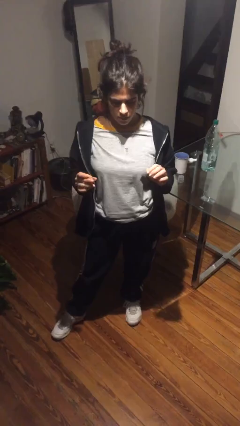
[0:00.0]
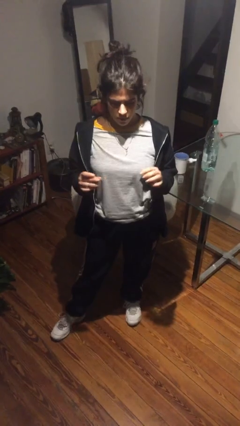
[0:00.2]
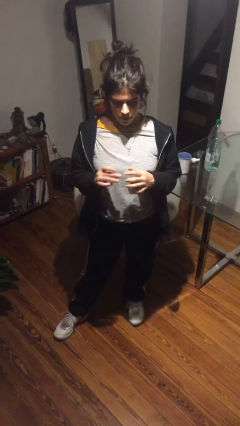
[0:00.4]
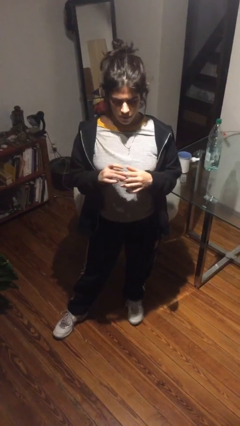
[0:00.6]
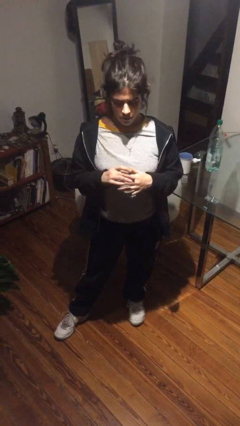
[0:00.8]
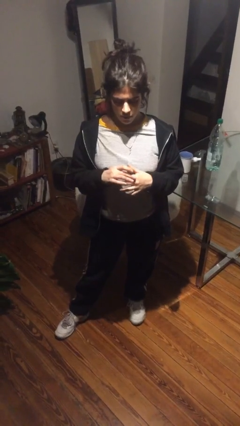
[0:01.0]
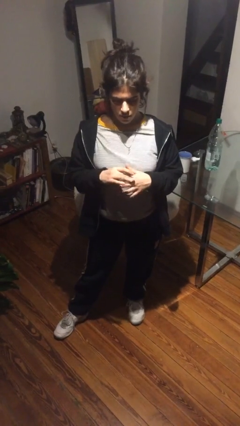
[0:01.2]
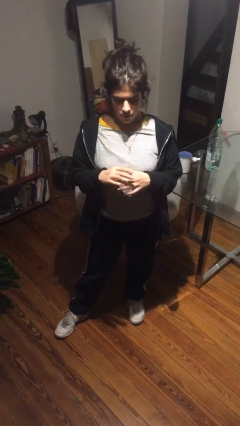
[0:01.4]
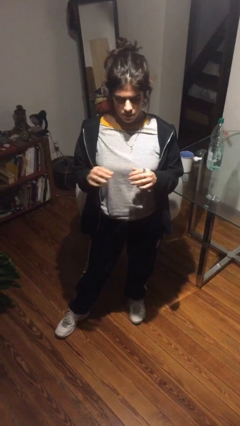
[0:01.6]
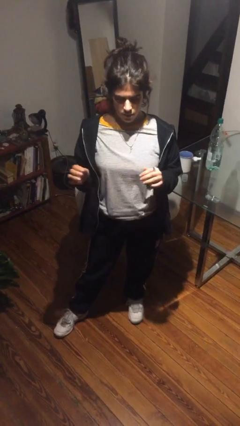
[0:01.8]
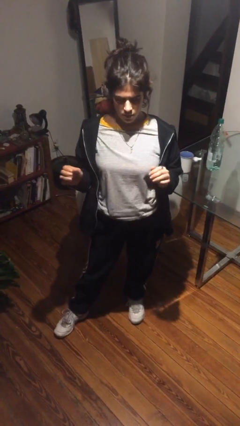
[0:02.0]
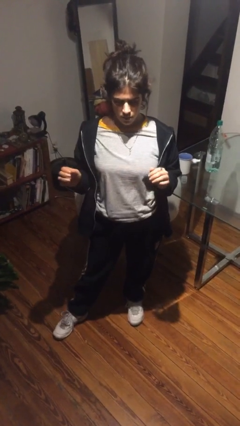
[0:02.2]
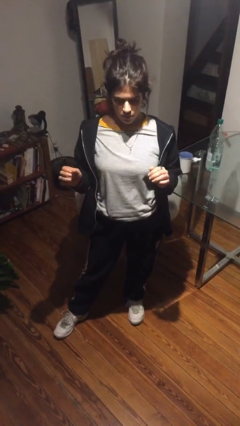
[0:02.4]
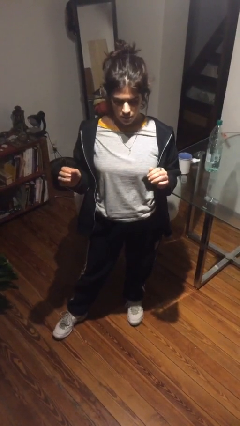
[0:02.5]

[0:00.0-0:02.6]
person puts on ring

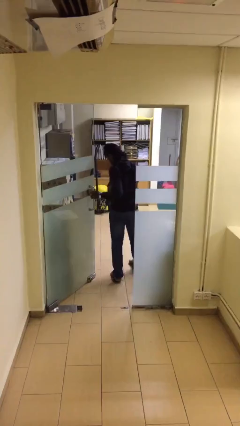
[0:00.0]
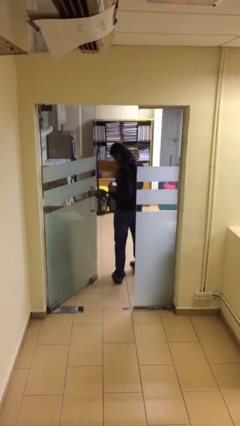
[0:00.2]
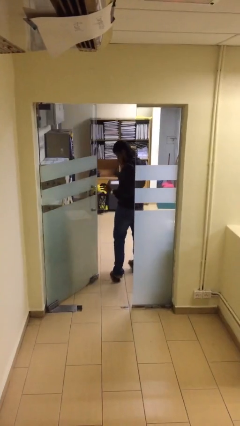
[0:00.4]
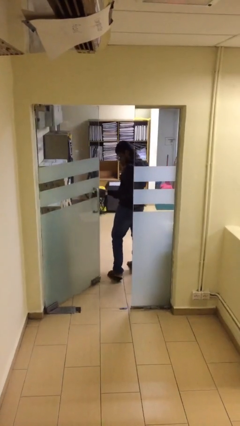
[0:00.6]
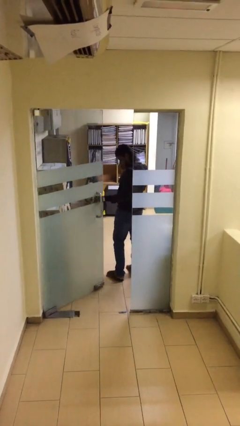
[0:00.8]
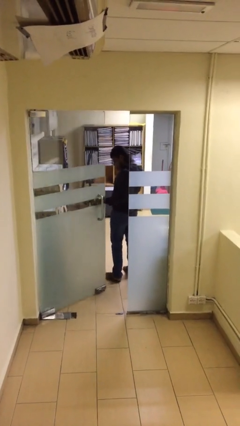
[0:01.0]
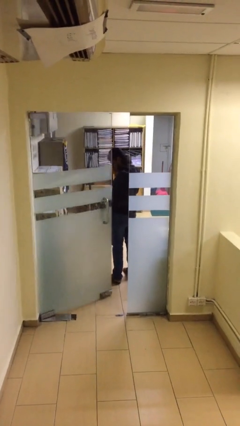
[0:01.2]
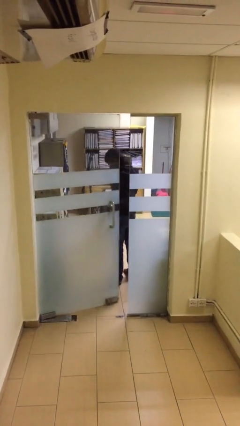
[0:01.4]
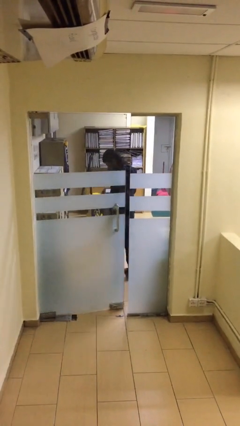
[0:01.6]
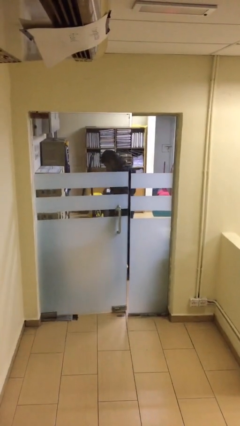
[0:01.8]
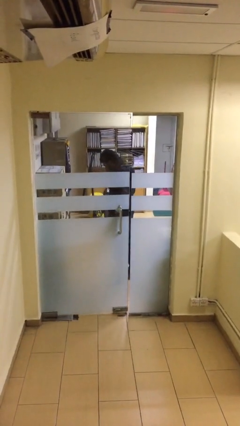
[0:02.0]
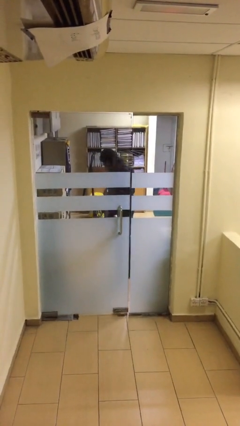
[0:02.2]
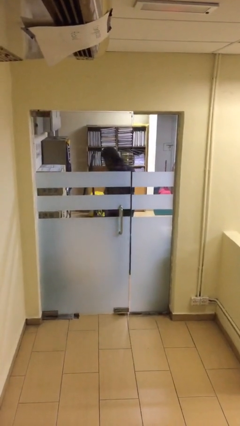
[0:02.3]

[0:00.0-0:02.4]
person closes facility door

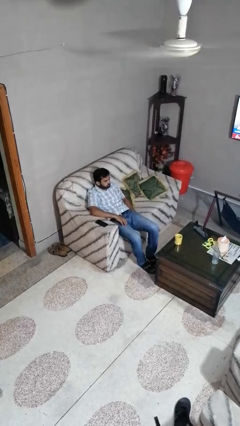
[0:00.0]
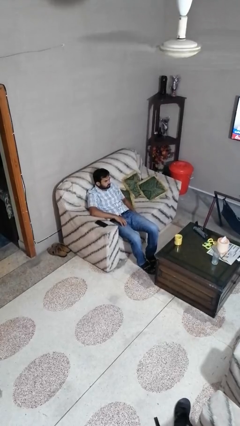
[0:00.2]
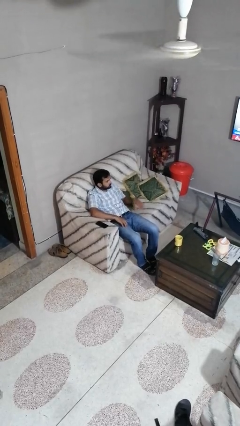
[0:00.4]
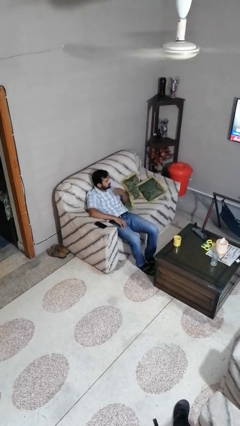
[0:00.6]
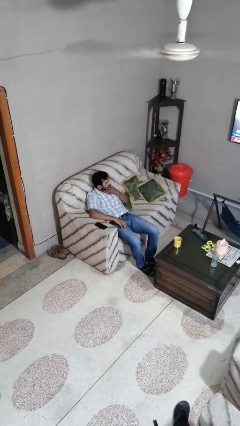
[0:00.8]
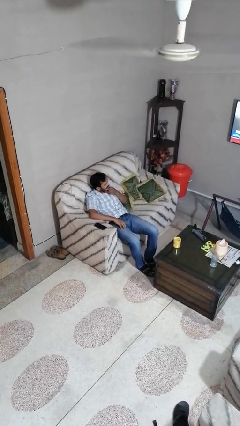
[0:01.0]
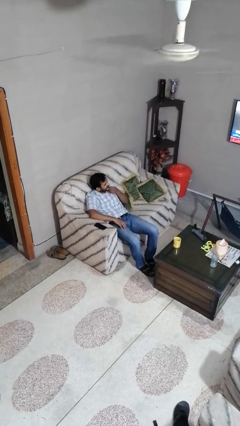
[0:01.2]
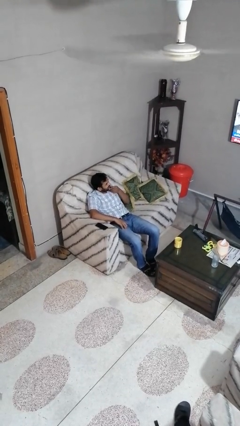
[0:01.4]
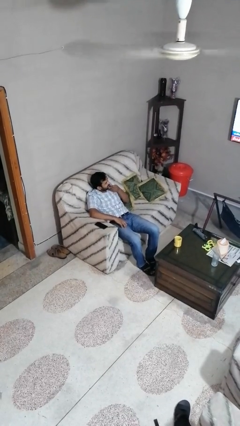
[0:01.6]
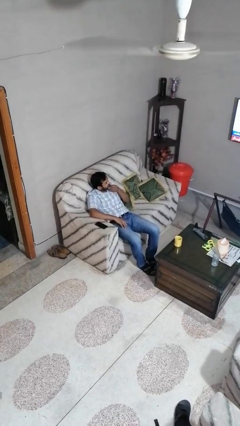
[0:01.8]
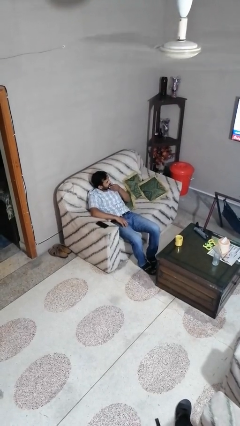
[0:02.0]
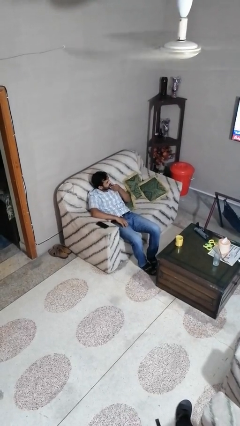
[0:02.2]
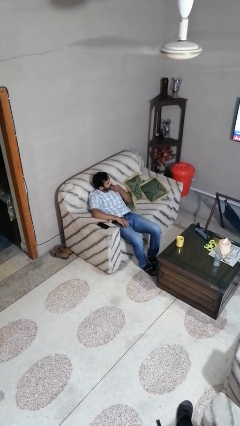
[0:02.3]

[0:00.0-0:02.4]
person strokes chin

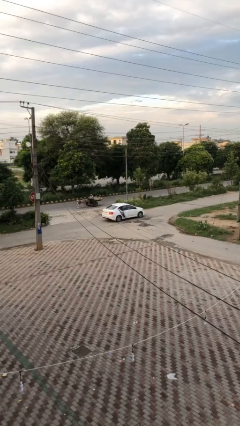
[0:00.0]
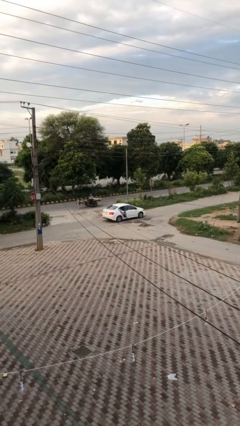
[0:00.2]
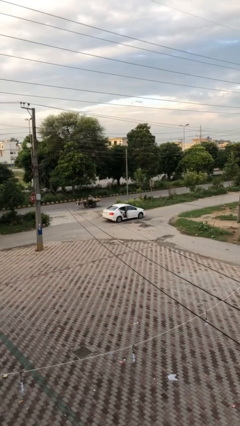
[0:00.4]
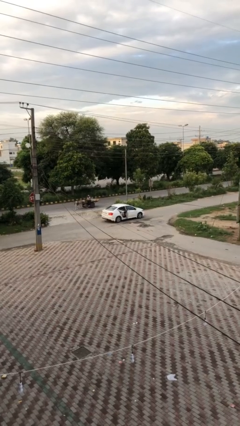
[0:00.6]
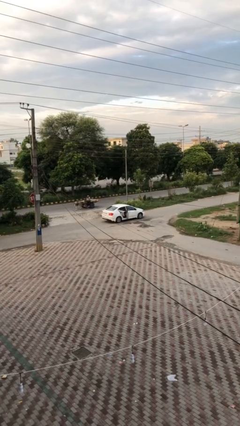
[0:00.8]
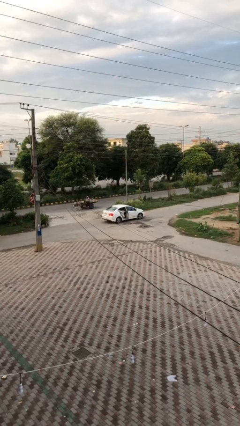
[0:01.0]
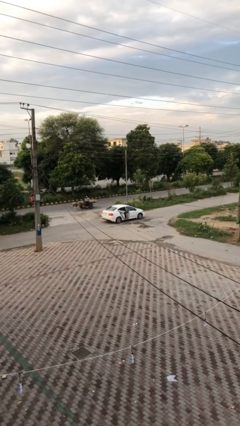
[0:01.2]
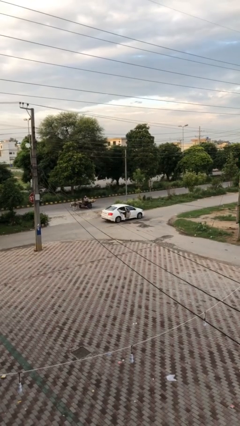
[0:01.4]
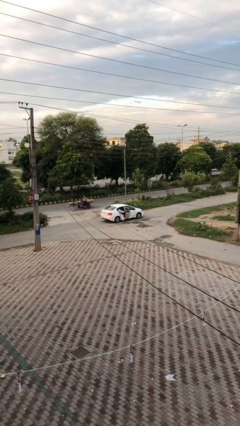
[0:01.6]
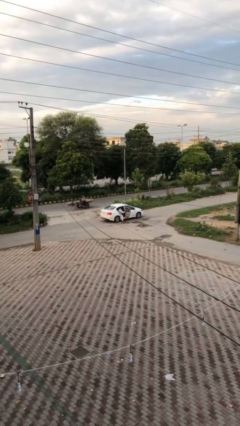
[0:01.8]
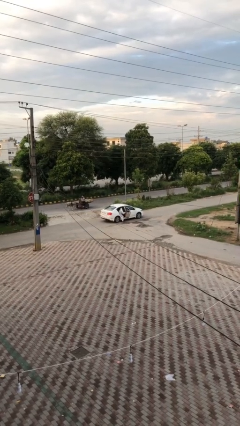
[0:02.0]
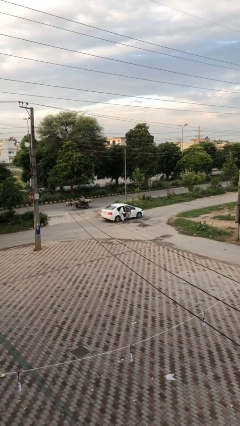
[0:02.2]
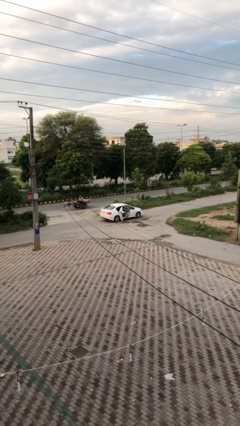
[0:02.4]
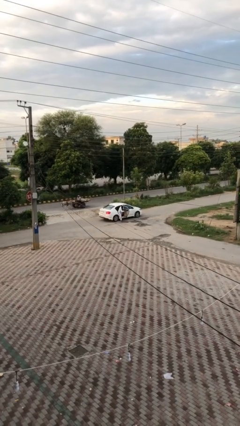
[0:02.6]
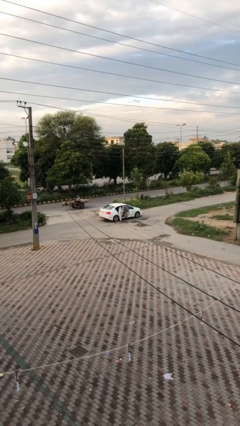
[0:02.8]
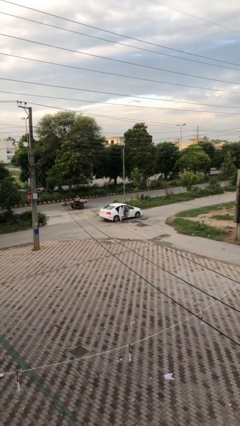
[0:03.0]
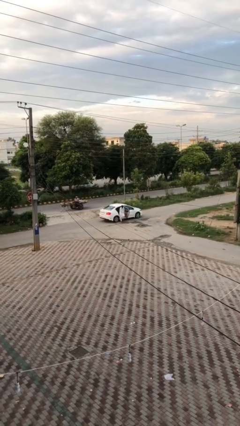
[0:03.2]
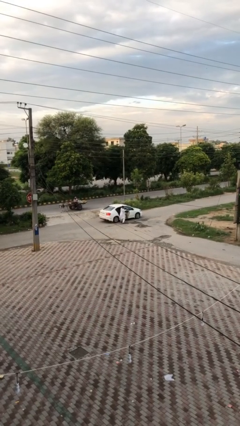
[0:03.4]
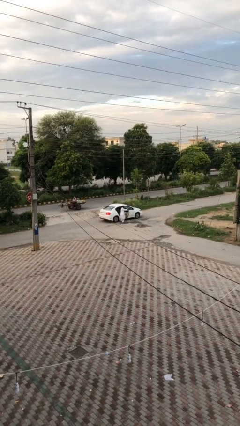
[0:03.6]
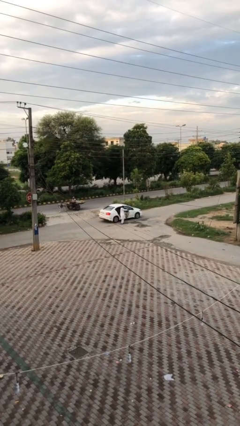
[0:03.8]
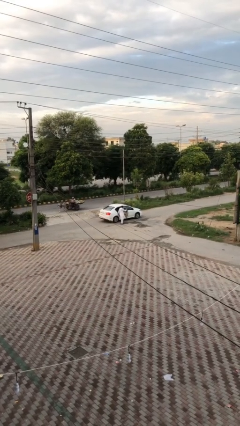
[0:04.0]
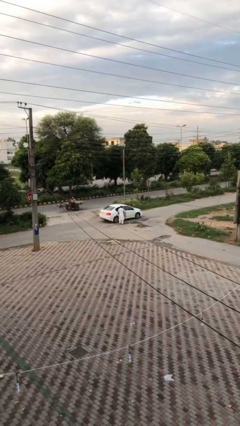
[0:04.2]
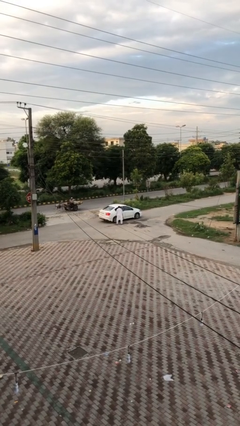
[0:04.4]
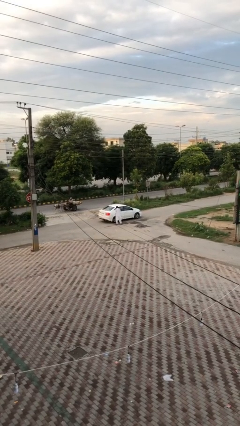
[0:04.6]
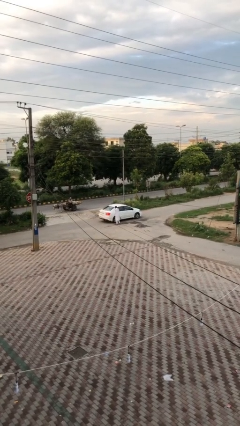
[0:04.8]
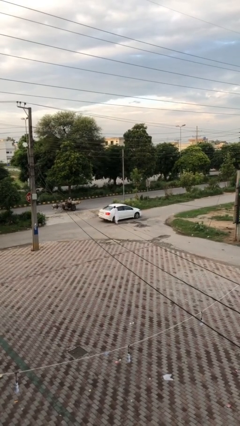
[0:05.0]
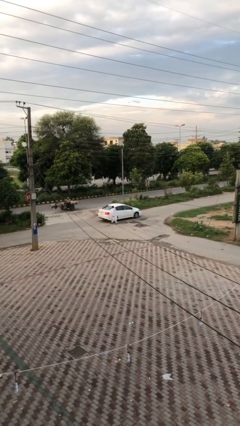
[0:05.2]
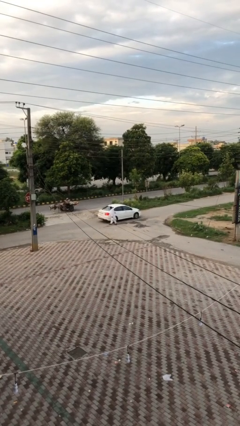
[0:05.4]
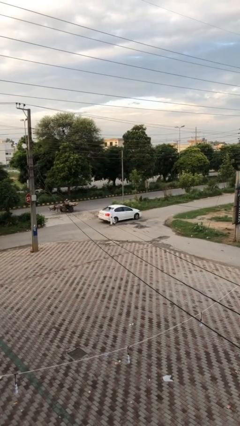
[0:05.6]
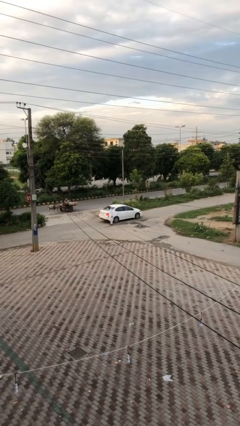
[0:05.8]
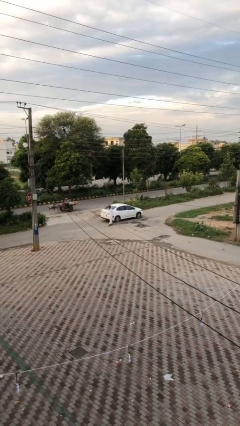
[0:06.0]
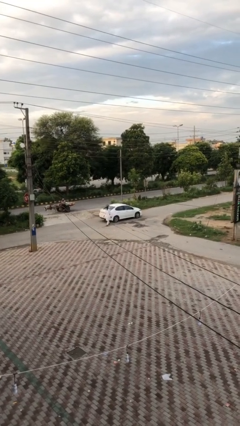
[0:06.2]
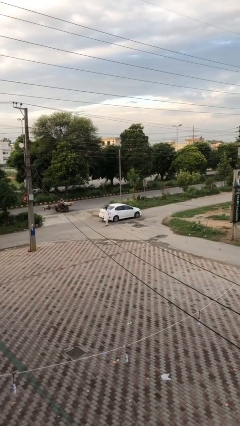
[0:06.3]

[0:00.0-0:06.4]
car drops off person

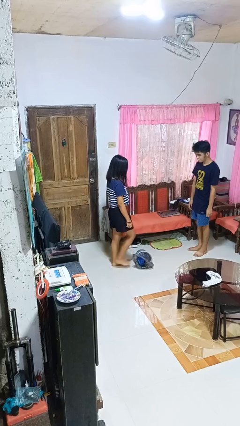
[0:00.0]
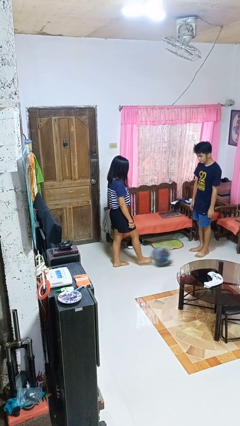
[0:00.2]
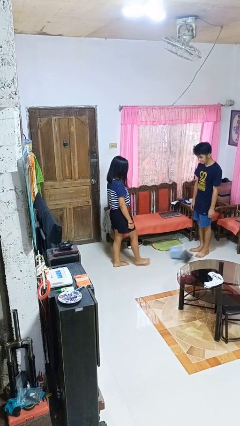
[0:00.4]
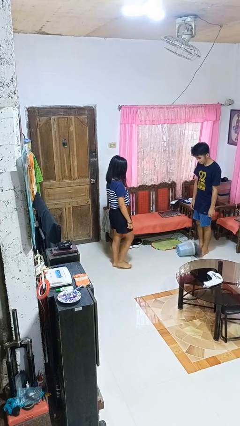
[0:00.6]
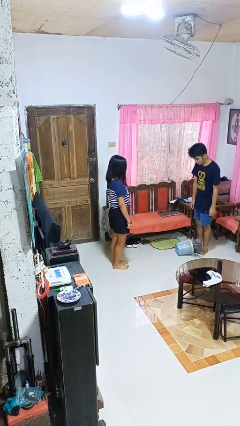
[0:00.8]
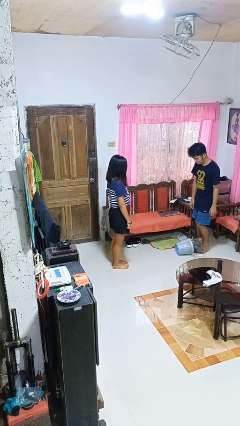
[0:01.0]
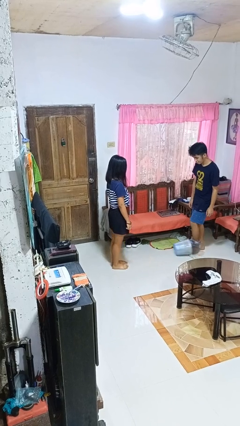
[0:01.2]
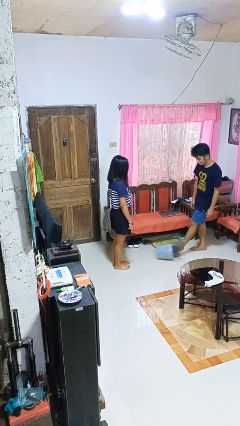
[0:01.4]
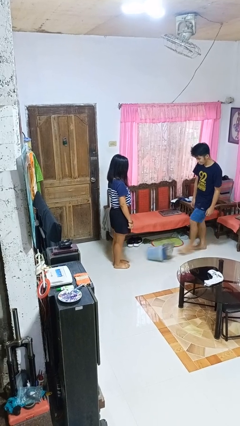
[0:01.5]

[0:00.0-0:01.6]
person kicks object to person

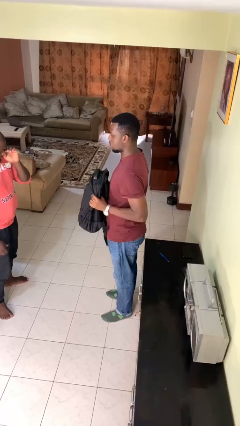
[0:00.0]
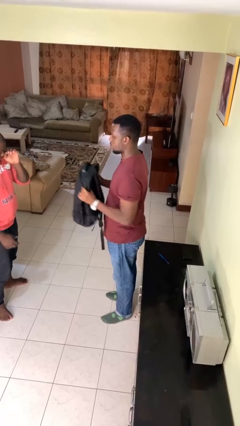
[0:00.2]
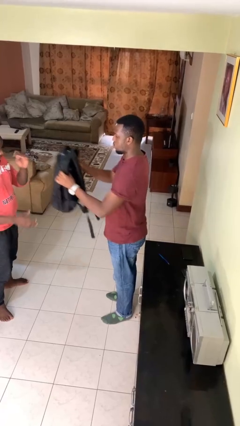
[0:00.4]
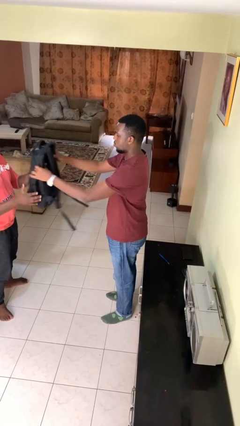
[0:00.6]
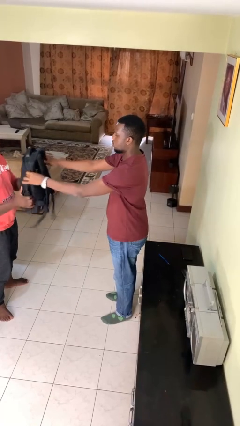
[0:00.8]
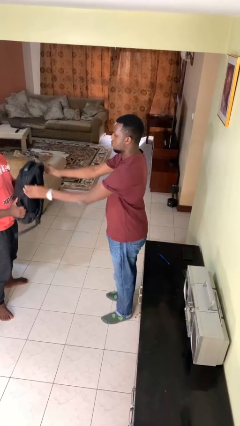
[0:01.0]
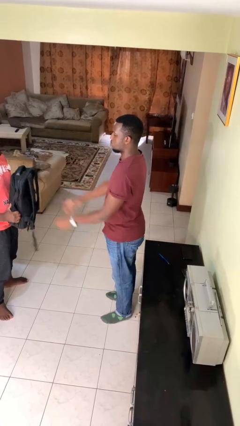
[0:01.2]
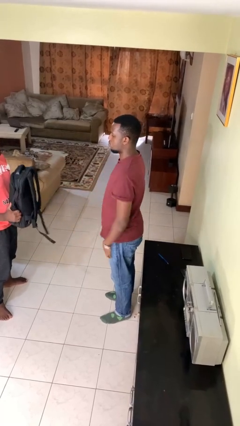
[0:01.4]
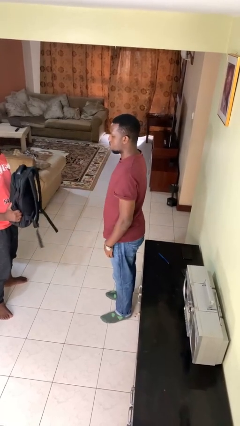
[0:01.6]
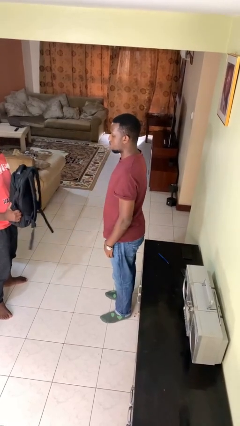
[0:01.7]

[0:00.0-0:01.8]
person transfers object to person
